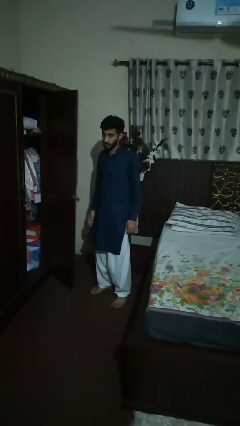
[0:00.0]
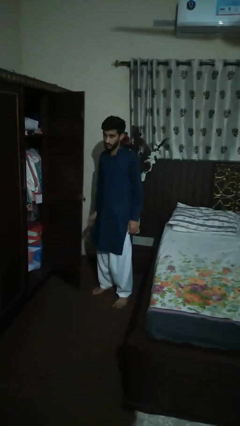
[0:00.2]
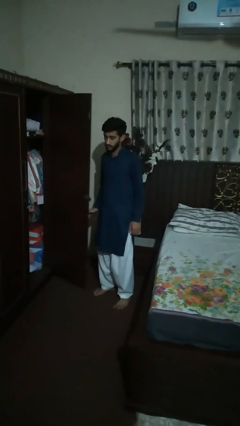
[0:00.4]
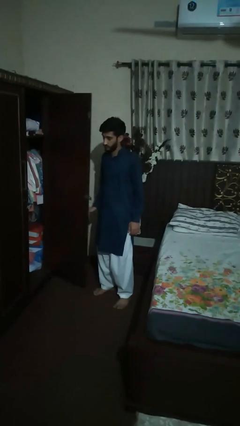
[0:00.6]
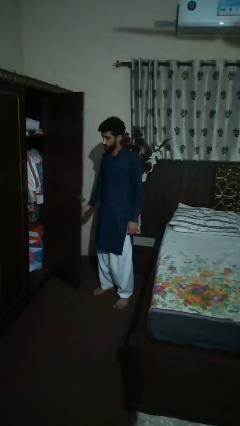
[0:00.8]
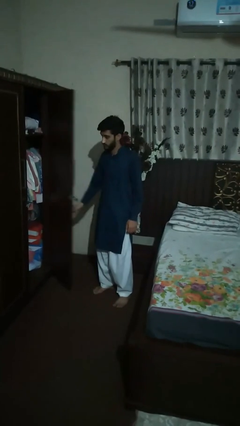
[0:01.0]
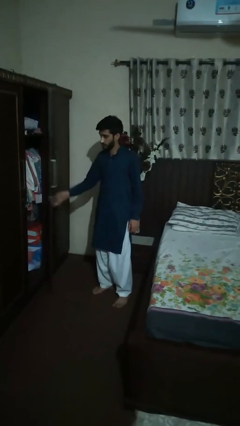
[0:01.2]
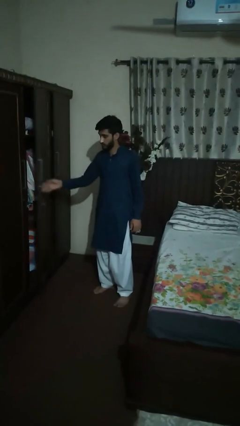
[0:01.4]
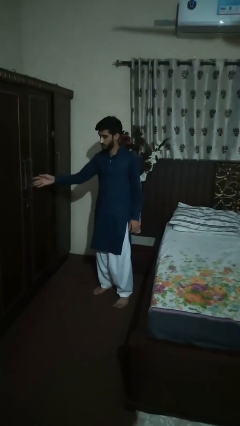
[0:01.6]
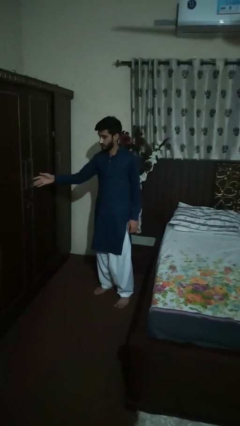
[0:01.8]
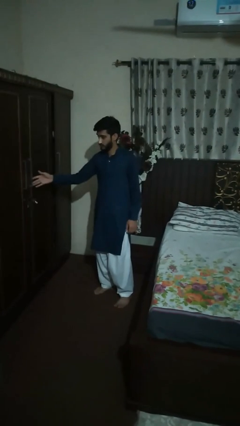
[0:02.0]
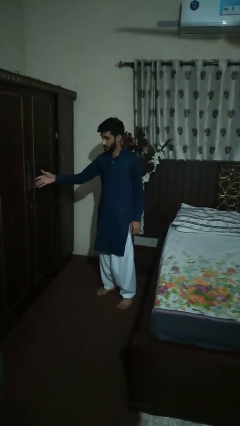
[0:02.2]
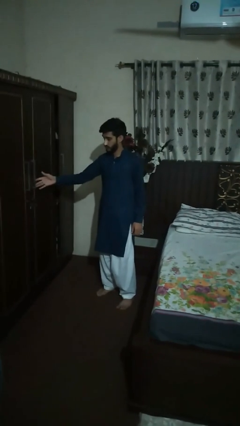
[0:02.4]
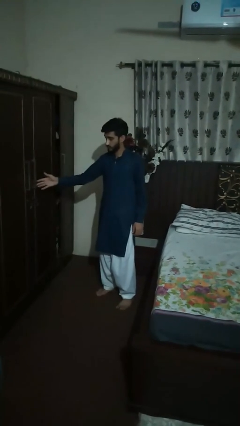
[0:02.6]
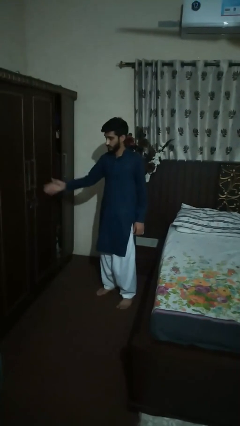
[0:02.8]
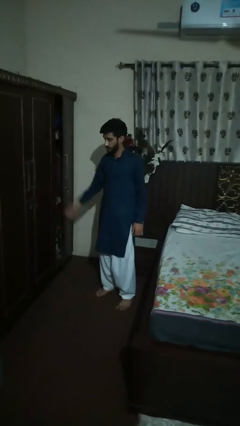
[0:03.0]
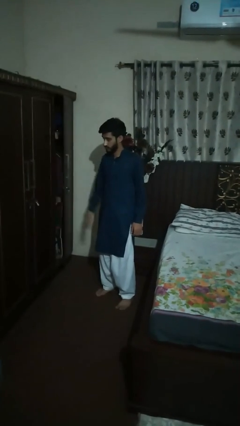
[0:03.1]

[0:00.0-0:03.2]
person closes dresser drawer

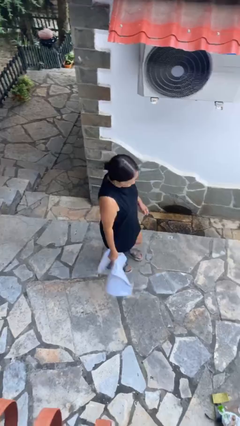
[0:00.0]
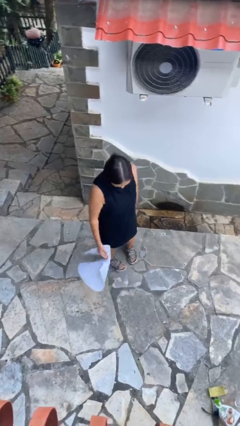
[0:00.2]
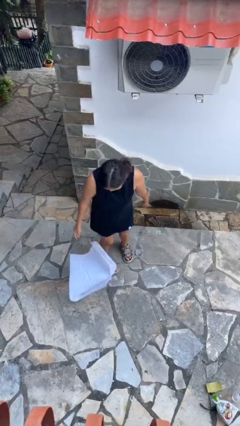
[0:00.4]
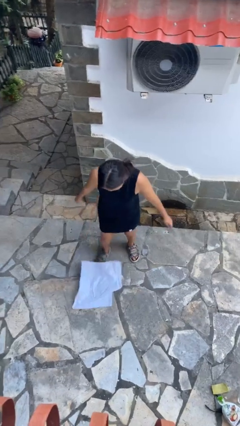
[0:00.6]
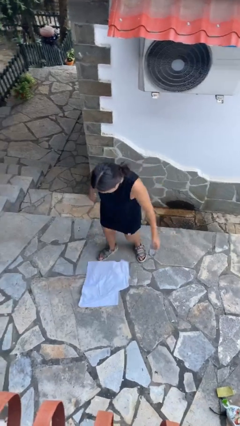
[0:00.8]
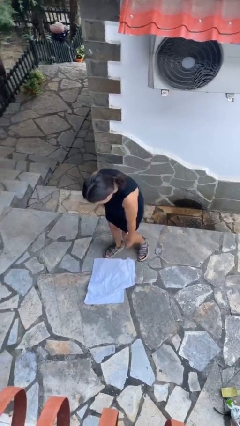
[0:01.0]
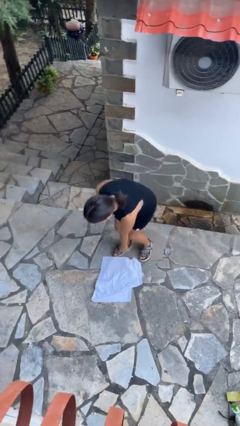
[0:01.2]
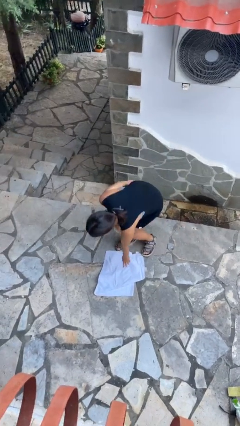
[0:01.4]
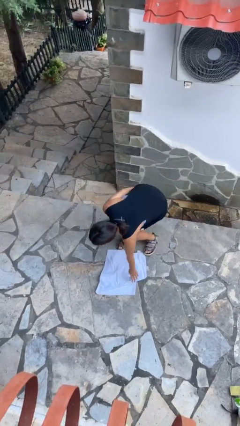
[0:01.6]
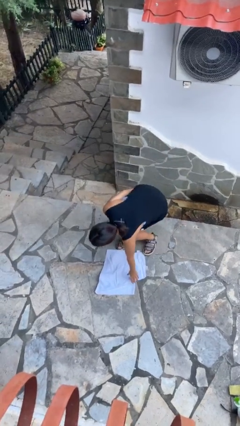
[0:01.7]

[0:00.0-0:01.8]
person drops object

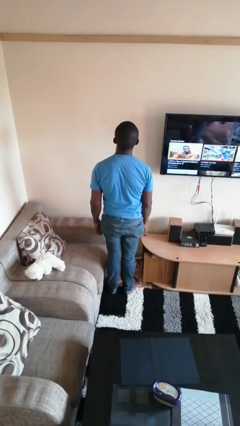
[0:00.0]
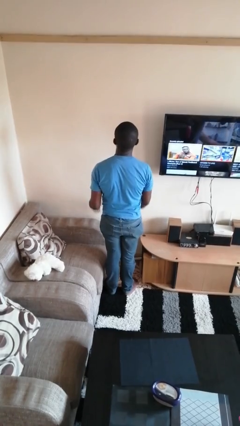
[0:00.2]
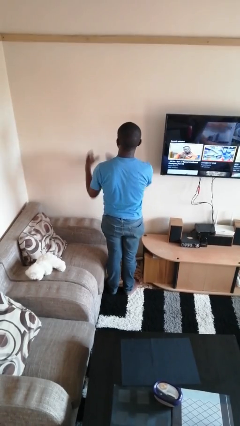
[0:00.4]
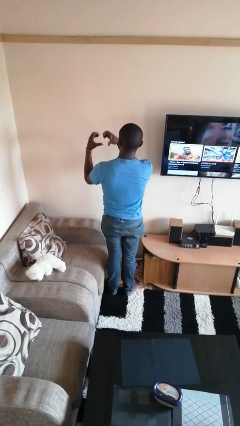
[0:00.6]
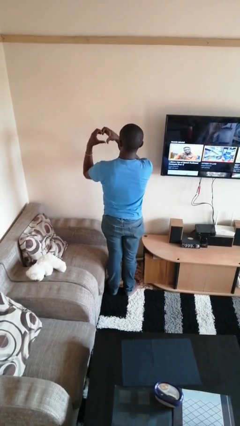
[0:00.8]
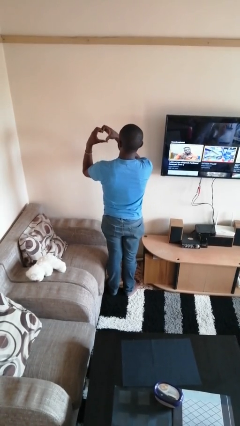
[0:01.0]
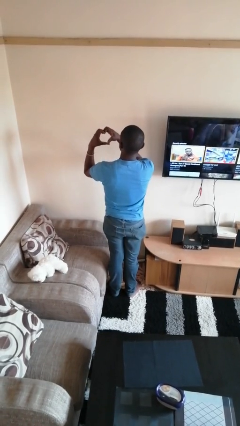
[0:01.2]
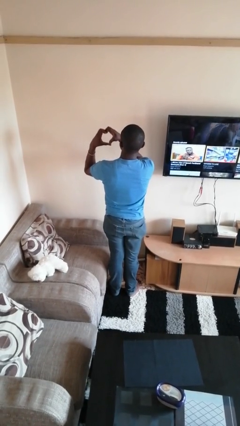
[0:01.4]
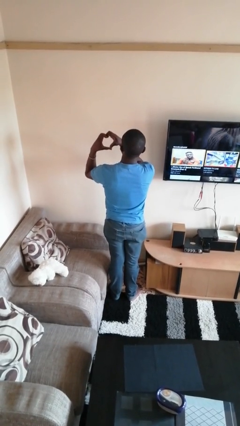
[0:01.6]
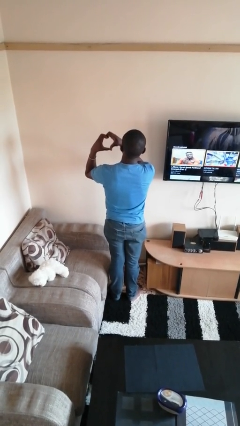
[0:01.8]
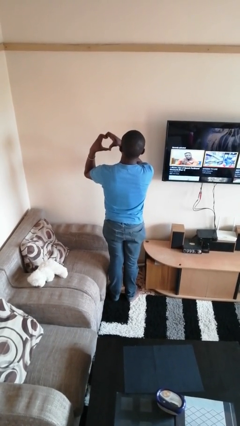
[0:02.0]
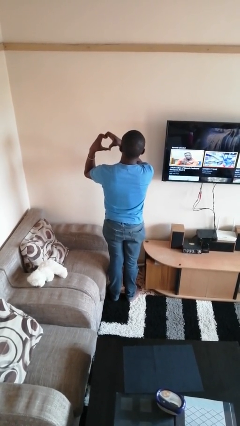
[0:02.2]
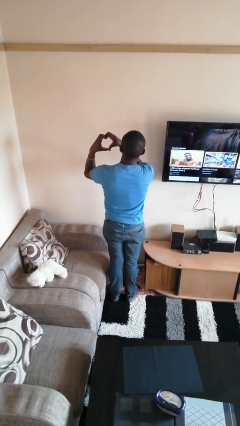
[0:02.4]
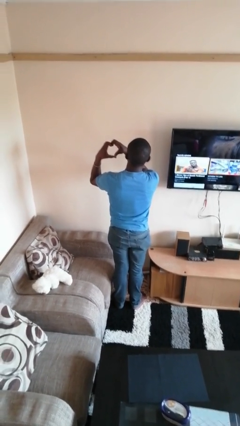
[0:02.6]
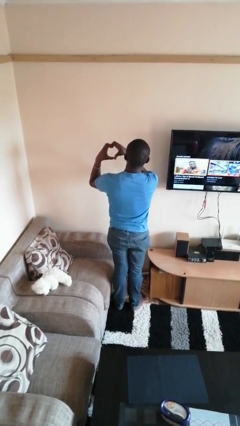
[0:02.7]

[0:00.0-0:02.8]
person gestures heart

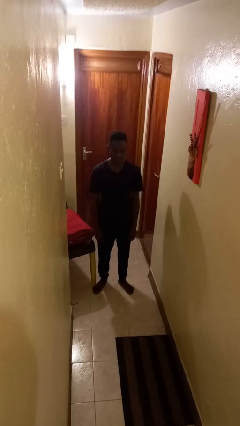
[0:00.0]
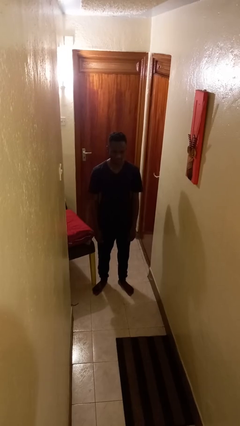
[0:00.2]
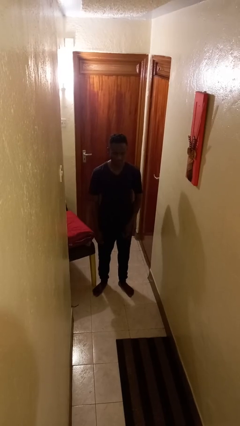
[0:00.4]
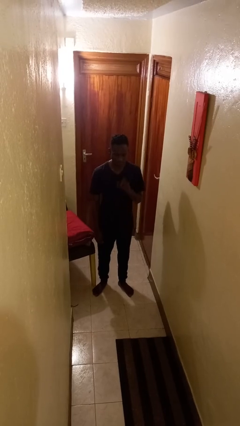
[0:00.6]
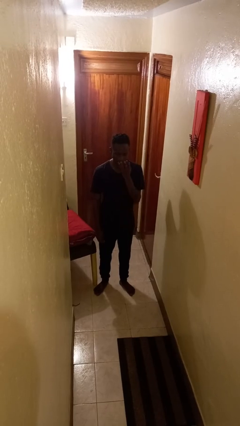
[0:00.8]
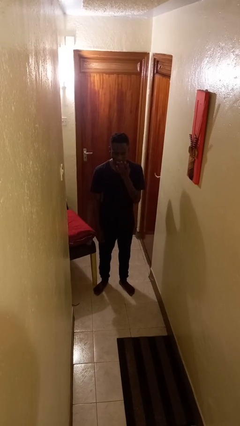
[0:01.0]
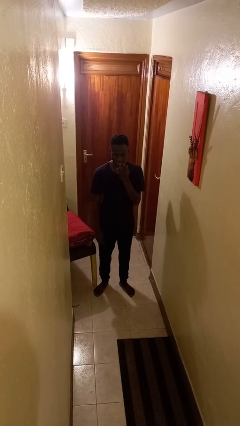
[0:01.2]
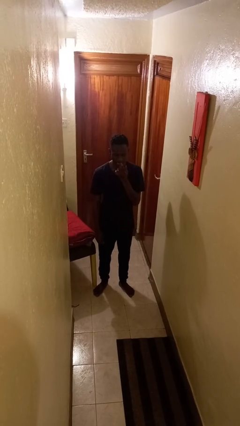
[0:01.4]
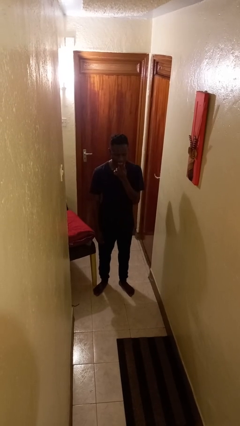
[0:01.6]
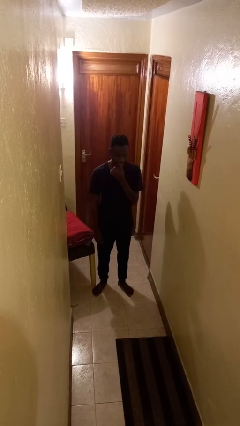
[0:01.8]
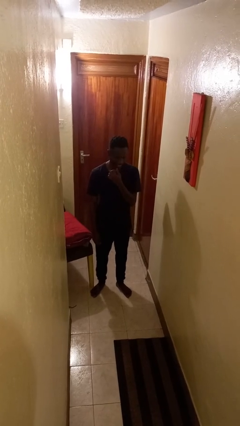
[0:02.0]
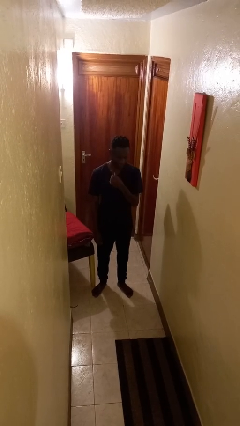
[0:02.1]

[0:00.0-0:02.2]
person licks fingers

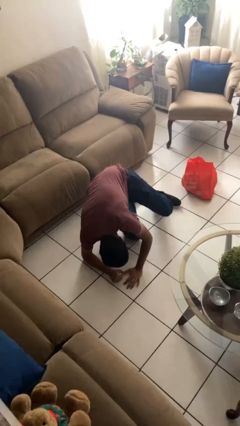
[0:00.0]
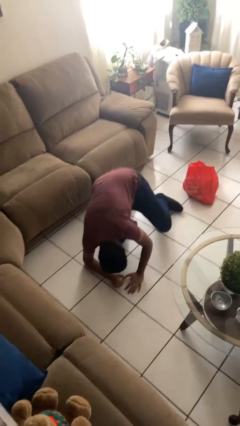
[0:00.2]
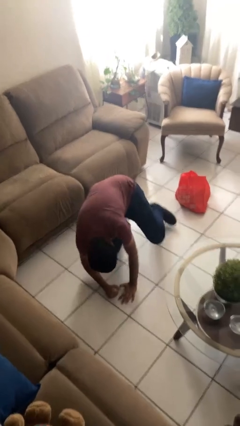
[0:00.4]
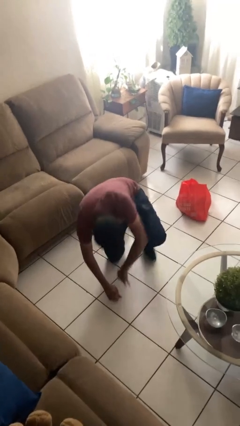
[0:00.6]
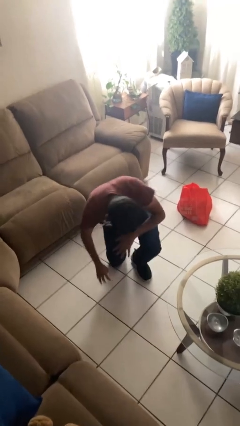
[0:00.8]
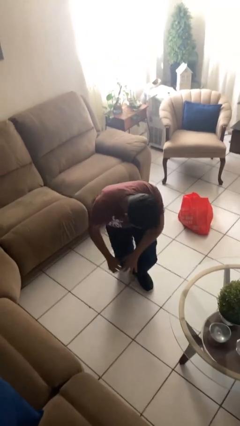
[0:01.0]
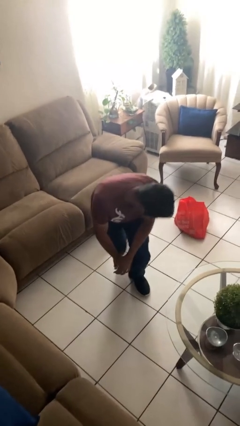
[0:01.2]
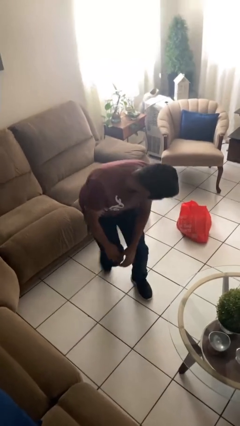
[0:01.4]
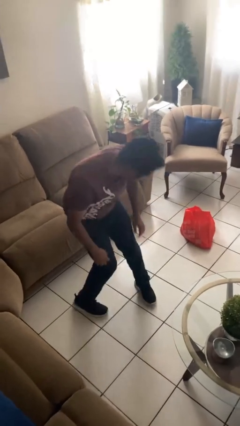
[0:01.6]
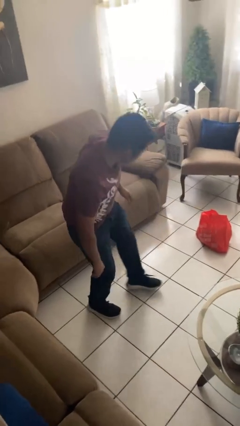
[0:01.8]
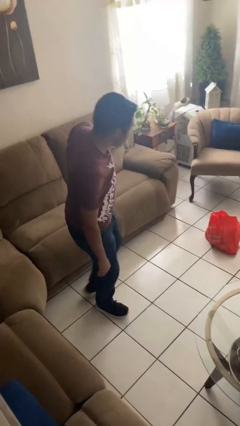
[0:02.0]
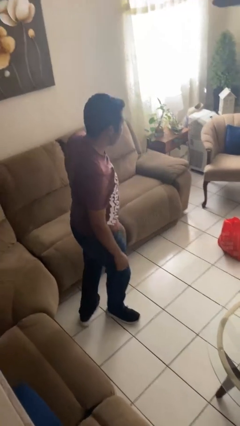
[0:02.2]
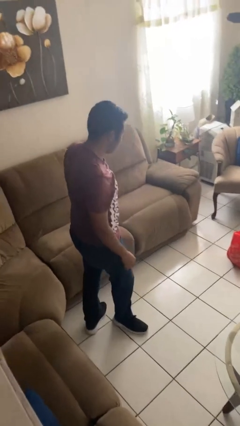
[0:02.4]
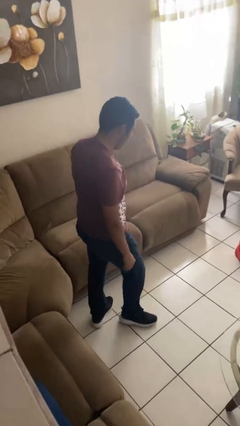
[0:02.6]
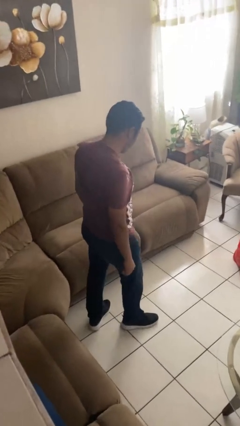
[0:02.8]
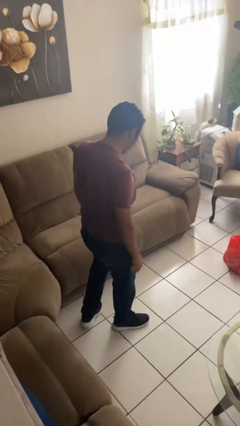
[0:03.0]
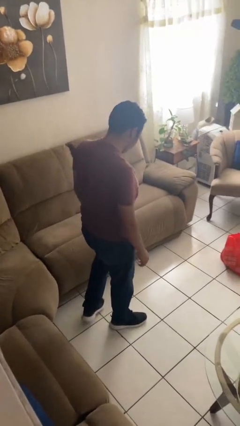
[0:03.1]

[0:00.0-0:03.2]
person stands up from floor

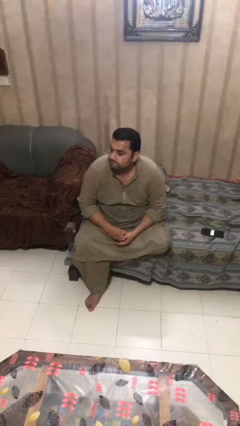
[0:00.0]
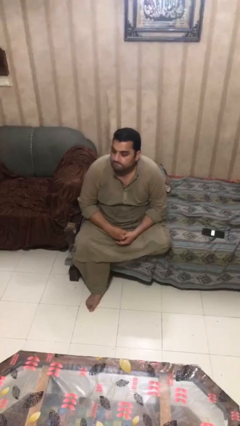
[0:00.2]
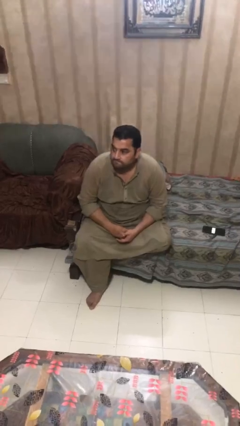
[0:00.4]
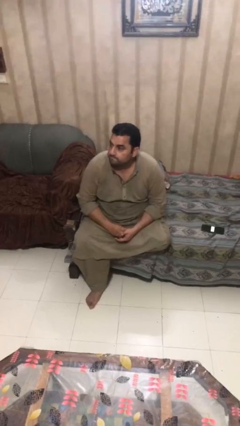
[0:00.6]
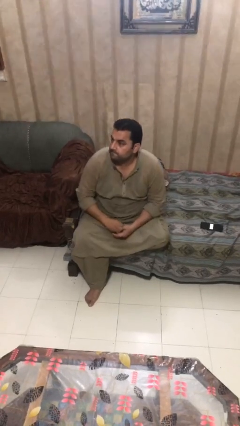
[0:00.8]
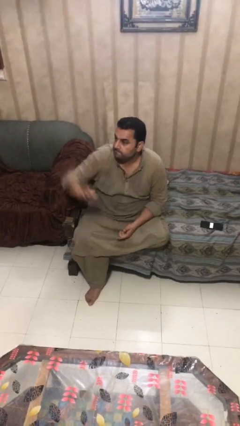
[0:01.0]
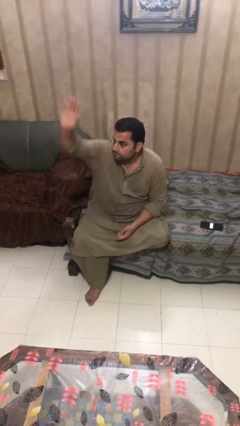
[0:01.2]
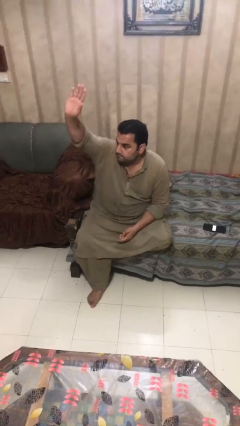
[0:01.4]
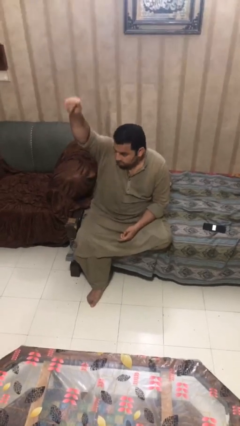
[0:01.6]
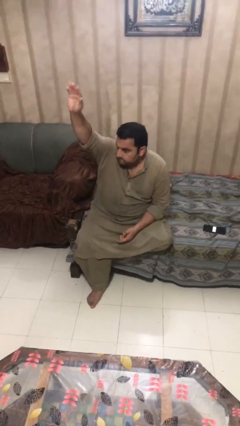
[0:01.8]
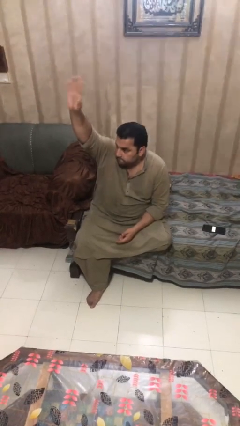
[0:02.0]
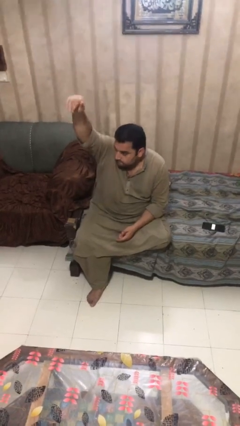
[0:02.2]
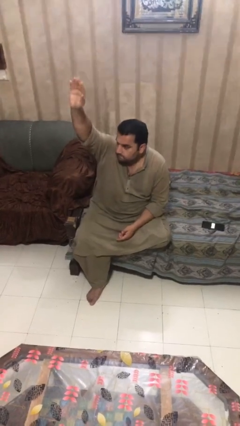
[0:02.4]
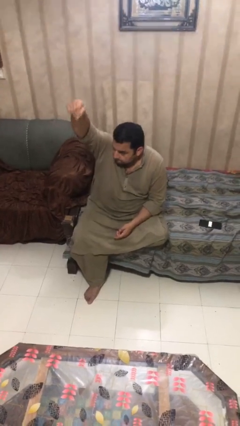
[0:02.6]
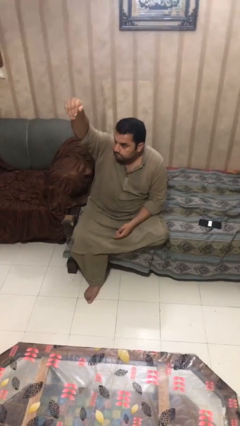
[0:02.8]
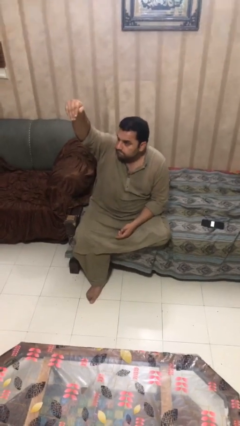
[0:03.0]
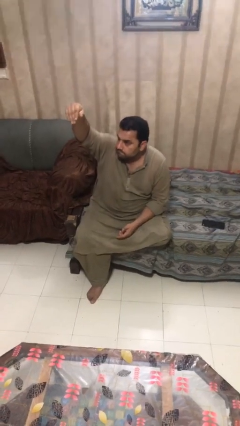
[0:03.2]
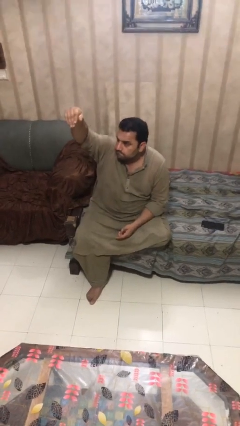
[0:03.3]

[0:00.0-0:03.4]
person gestures come here

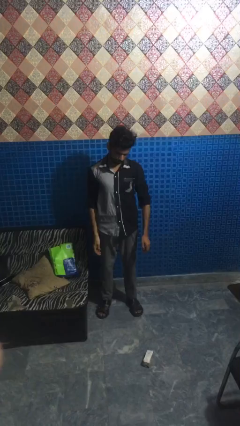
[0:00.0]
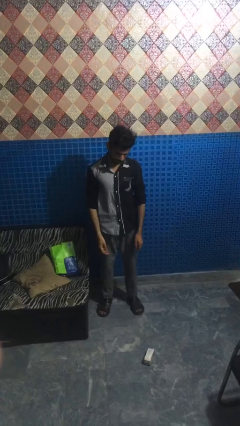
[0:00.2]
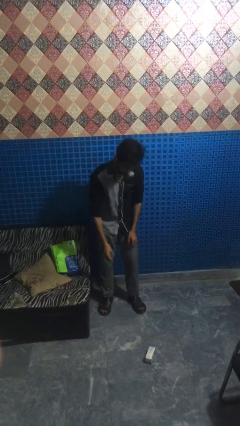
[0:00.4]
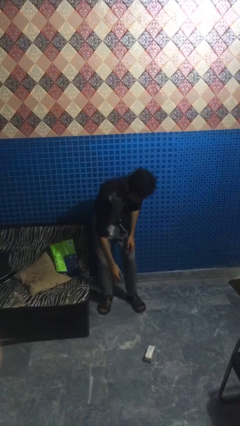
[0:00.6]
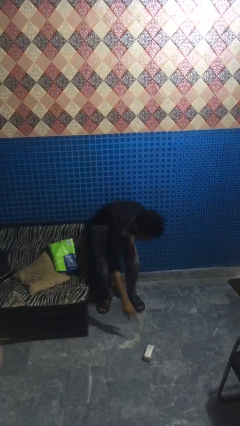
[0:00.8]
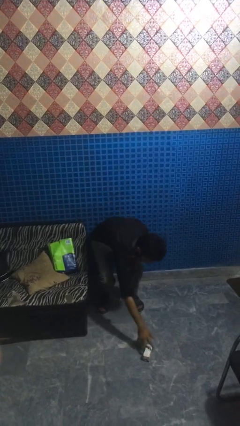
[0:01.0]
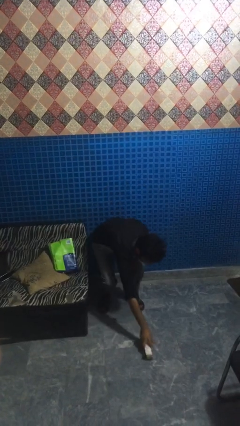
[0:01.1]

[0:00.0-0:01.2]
person picks up object from floor
